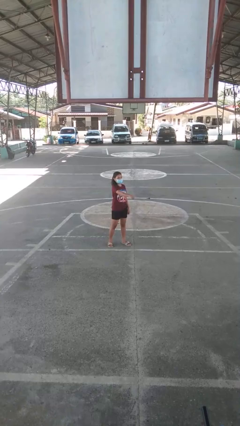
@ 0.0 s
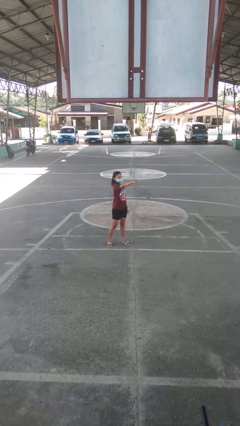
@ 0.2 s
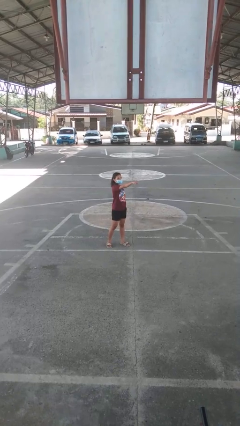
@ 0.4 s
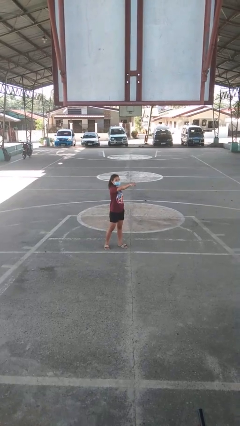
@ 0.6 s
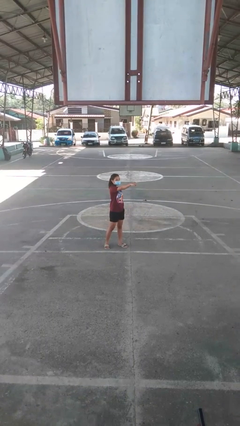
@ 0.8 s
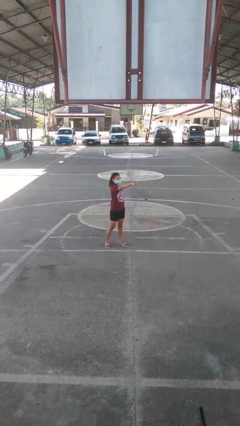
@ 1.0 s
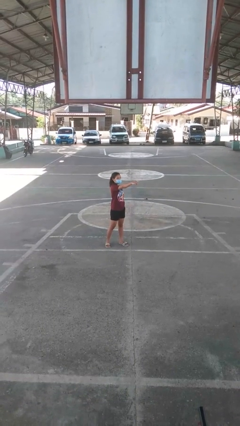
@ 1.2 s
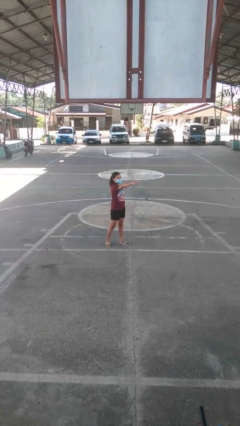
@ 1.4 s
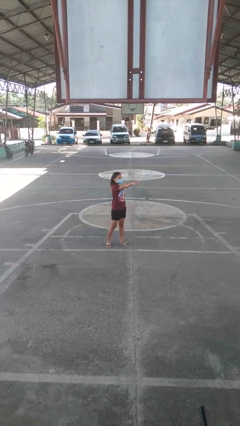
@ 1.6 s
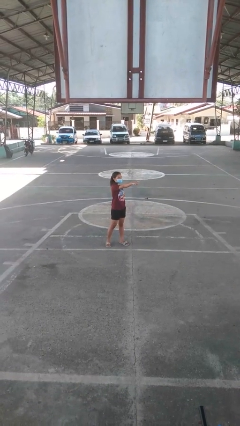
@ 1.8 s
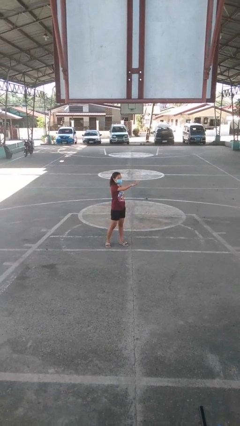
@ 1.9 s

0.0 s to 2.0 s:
person points at person

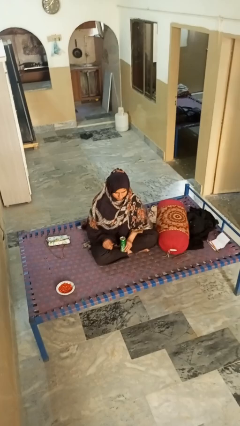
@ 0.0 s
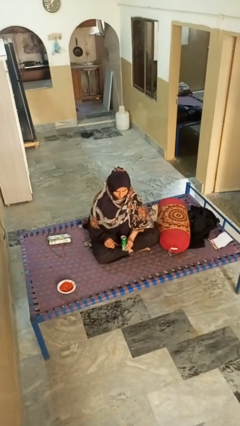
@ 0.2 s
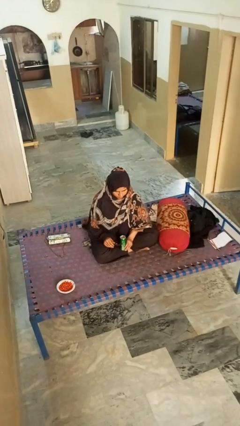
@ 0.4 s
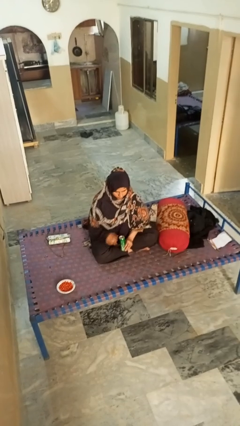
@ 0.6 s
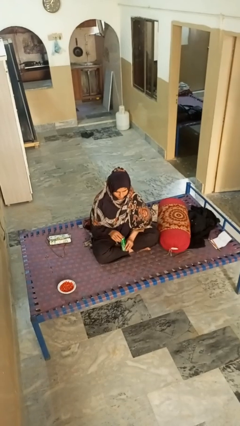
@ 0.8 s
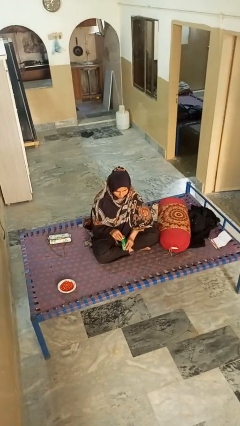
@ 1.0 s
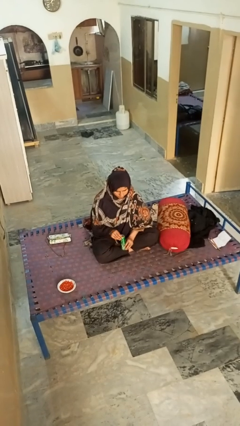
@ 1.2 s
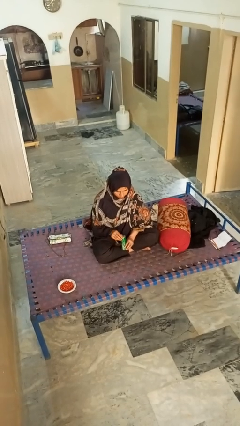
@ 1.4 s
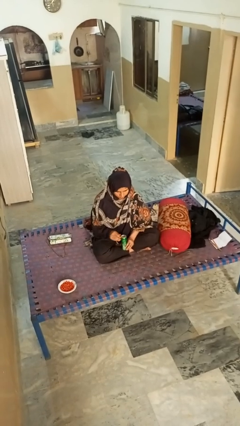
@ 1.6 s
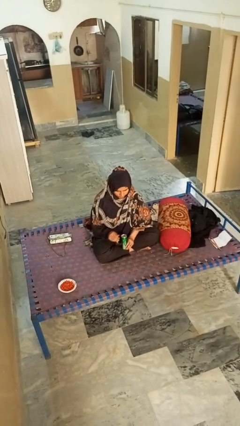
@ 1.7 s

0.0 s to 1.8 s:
person opens can with can opener

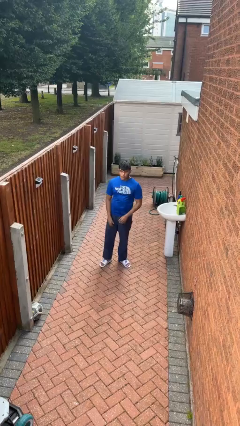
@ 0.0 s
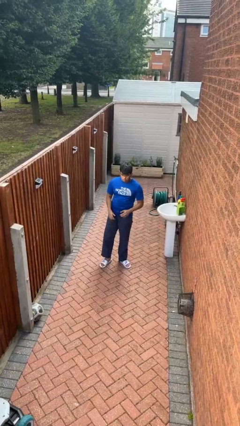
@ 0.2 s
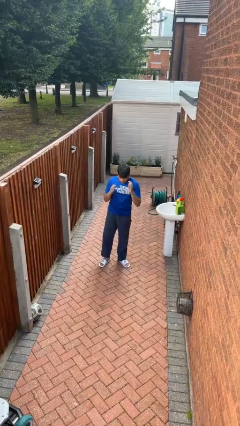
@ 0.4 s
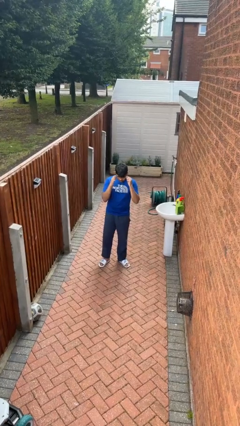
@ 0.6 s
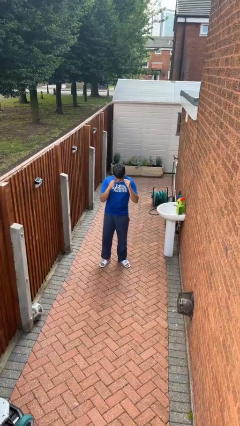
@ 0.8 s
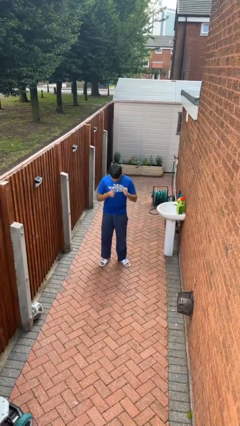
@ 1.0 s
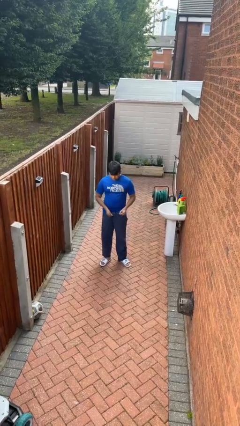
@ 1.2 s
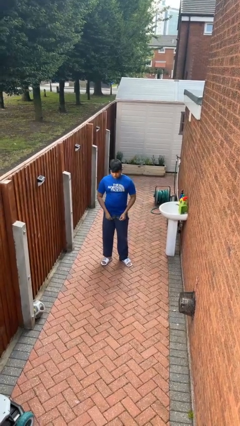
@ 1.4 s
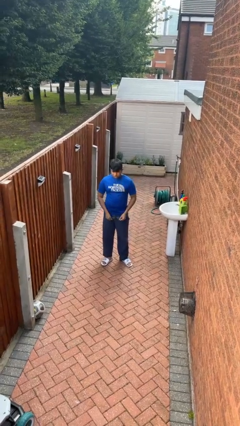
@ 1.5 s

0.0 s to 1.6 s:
person takes off glasses

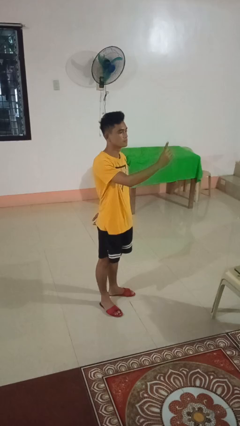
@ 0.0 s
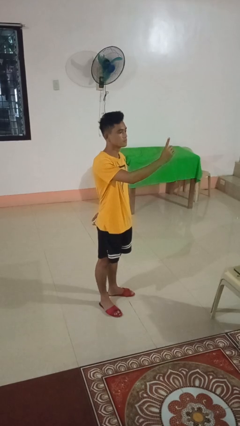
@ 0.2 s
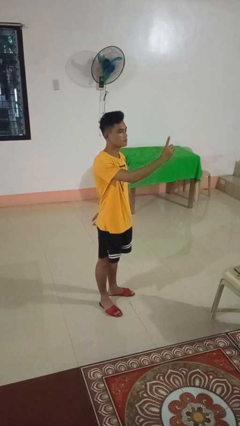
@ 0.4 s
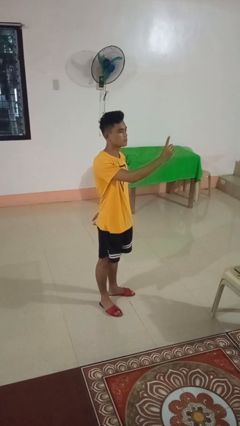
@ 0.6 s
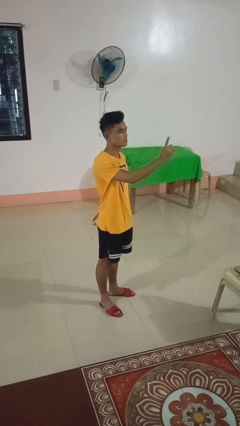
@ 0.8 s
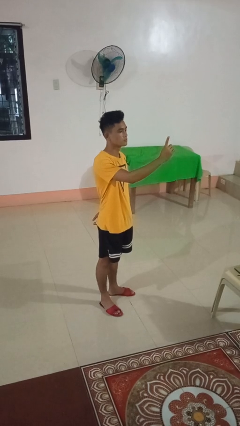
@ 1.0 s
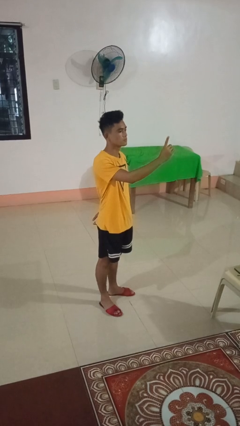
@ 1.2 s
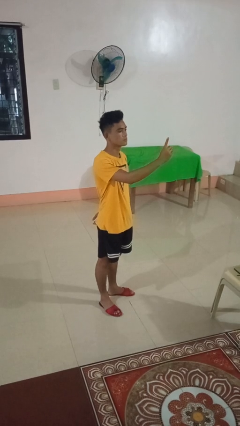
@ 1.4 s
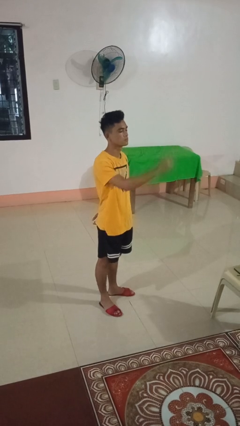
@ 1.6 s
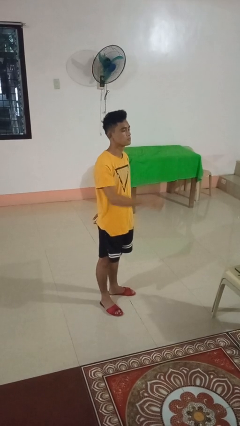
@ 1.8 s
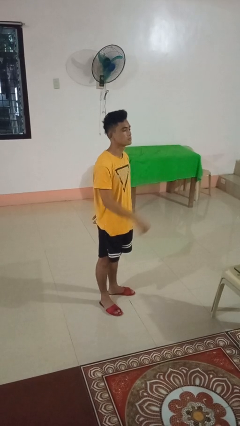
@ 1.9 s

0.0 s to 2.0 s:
person gestures number one

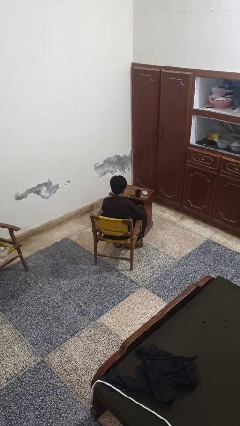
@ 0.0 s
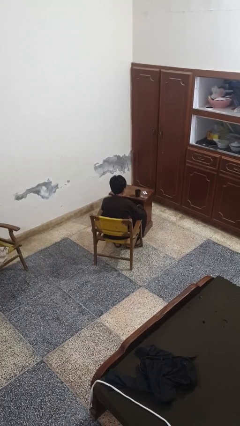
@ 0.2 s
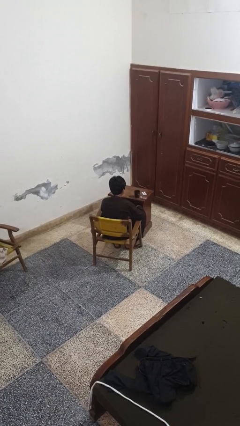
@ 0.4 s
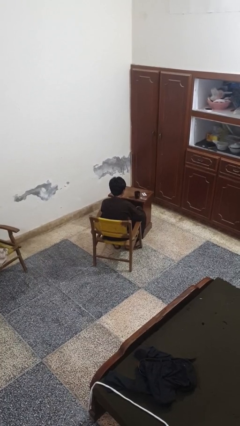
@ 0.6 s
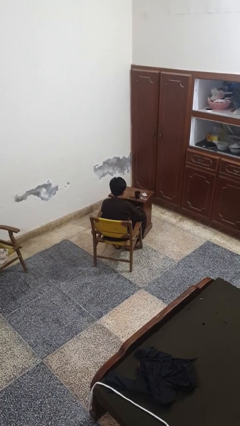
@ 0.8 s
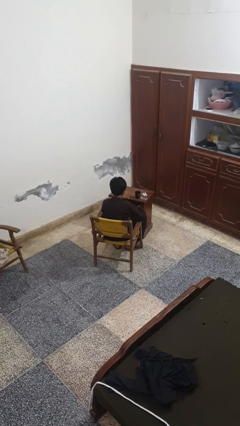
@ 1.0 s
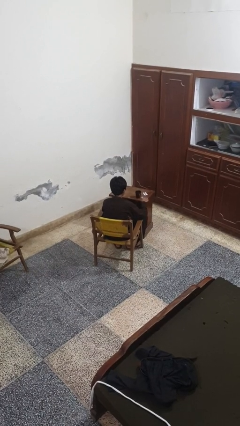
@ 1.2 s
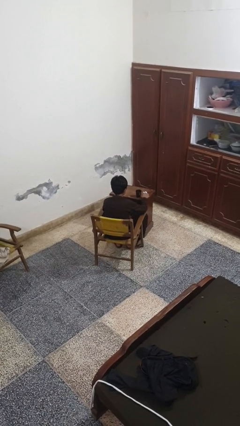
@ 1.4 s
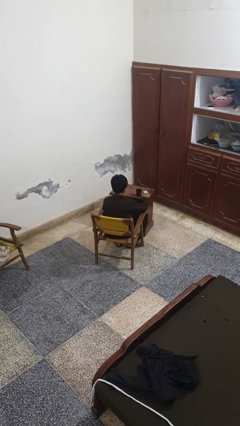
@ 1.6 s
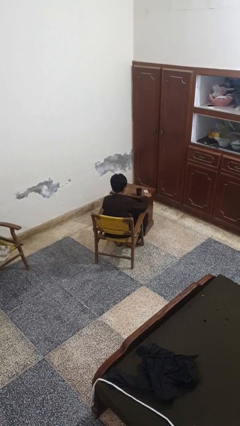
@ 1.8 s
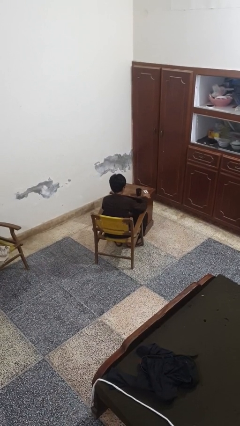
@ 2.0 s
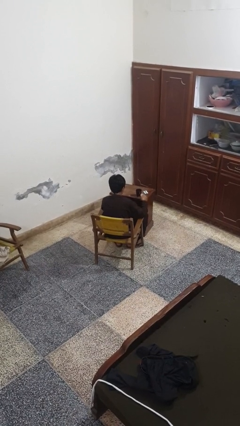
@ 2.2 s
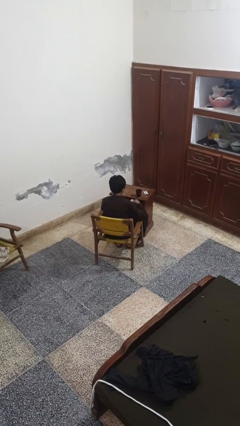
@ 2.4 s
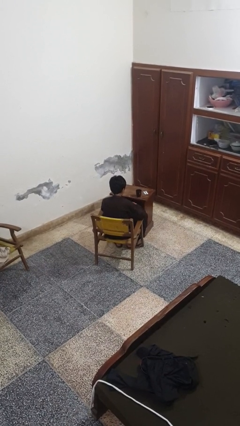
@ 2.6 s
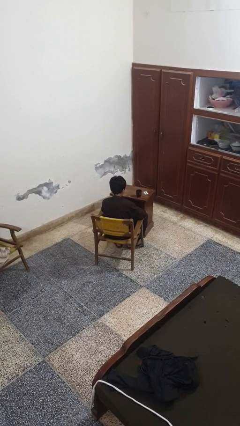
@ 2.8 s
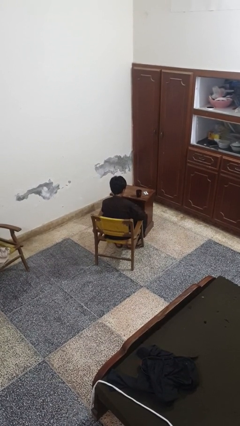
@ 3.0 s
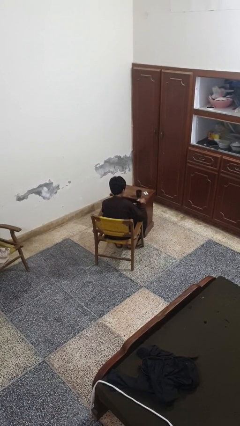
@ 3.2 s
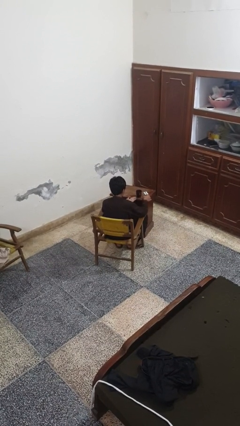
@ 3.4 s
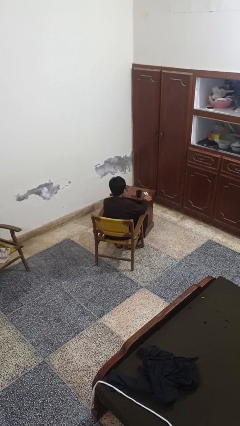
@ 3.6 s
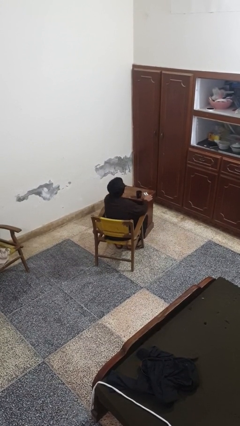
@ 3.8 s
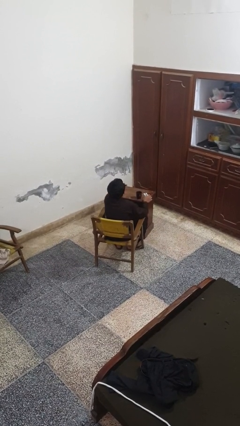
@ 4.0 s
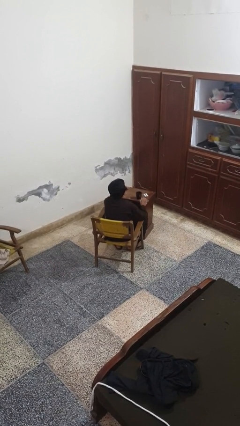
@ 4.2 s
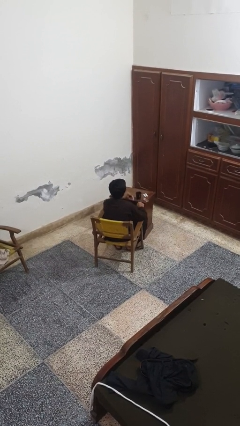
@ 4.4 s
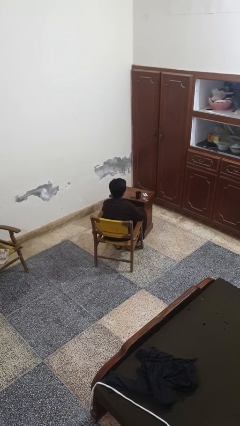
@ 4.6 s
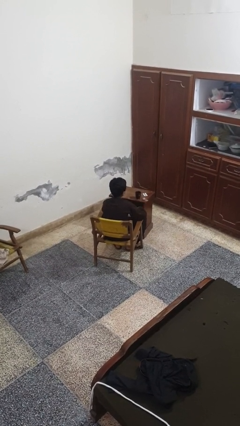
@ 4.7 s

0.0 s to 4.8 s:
person takes medicine pills

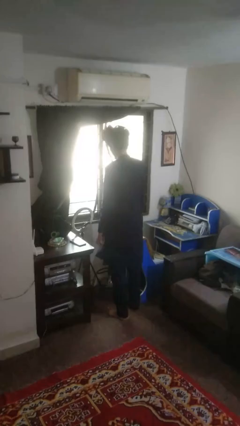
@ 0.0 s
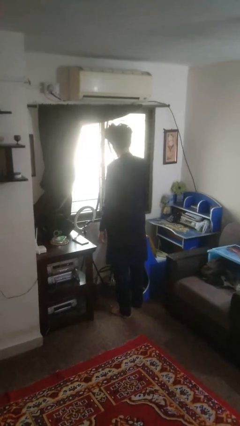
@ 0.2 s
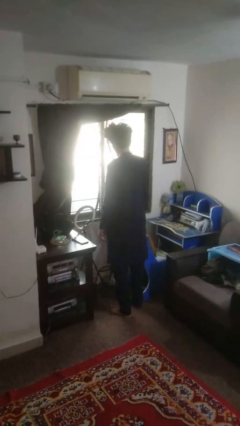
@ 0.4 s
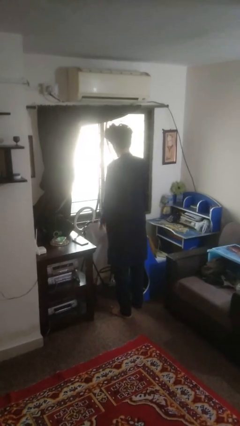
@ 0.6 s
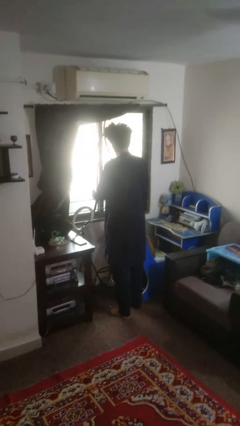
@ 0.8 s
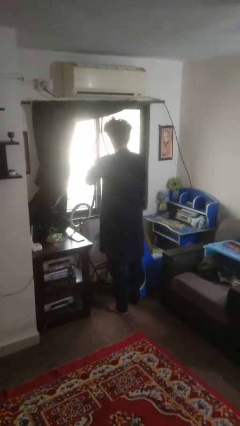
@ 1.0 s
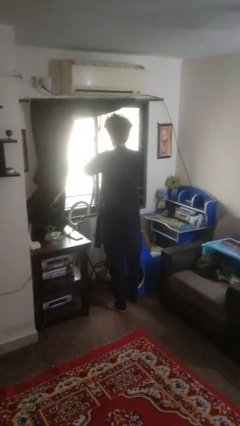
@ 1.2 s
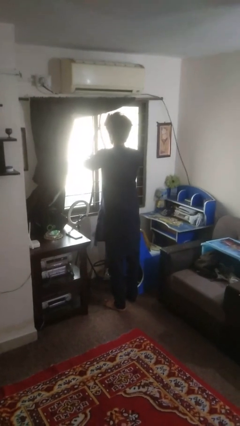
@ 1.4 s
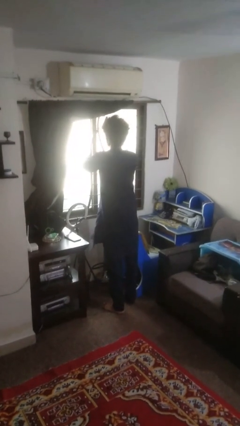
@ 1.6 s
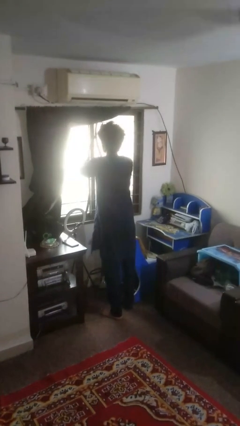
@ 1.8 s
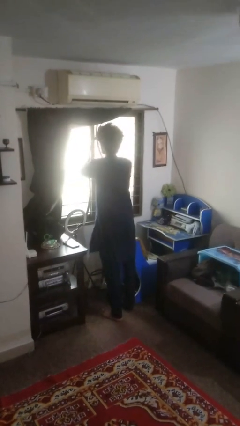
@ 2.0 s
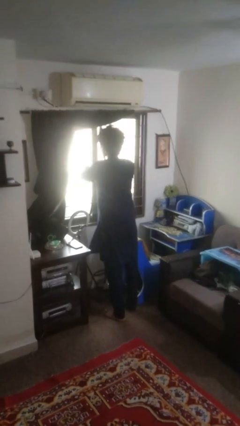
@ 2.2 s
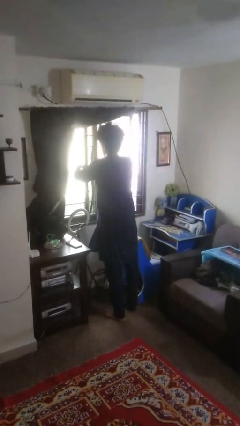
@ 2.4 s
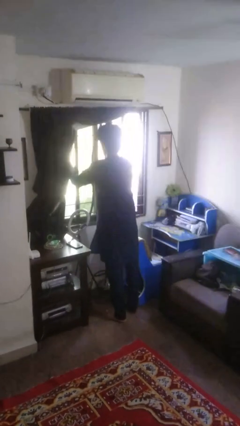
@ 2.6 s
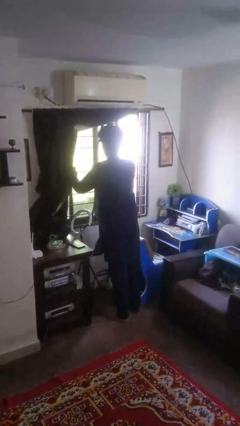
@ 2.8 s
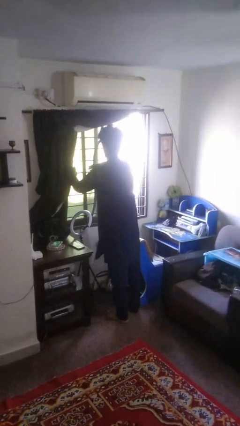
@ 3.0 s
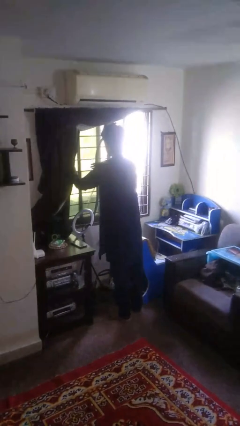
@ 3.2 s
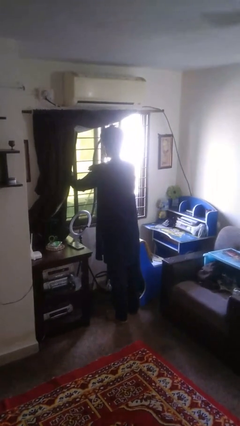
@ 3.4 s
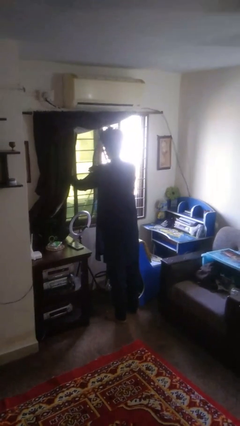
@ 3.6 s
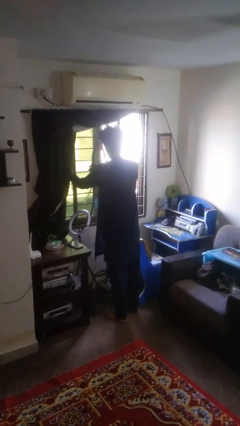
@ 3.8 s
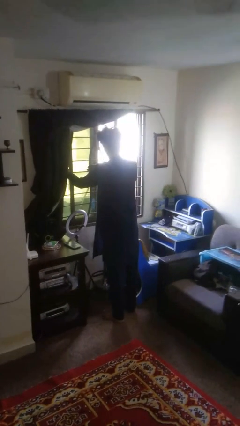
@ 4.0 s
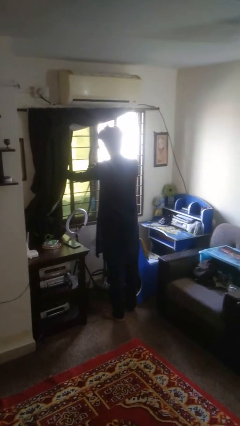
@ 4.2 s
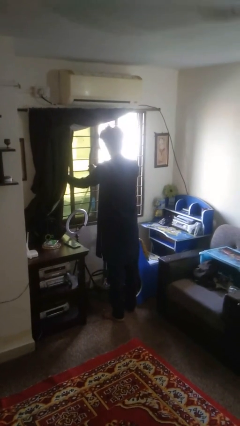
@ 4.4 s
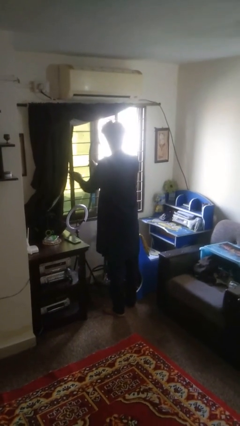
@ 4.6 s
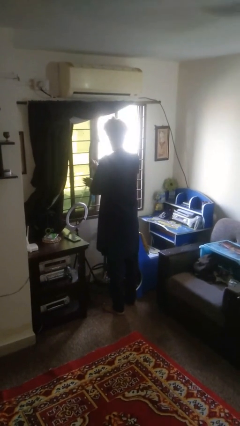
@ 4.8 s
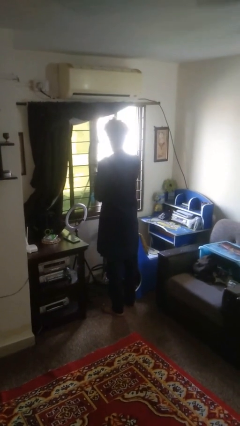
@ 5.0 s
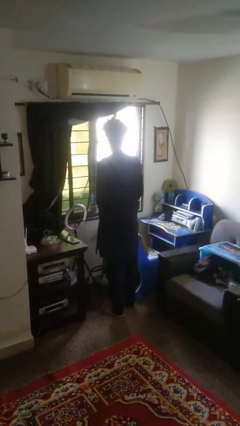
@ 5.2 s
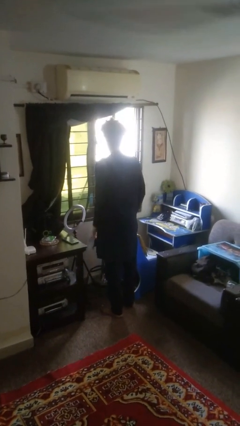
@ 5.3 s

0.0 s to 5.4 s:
person opens home window
